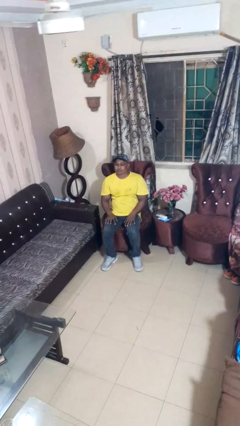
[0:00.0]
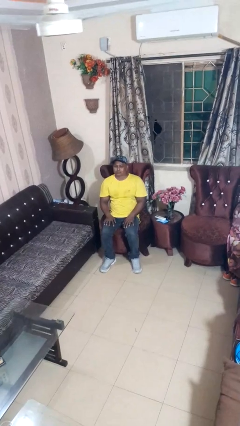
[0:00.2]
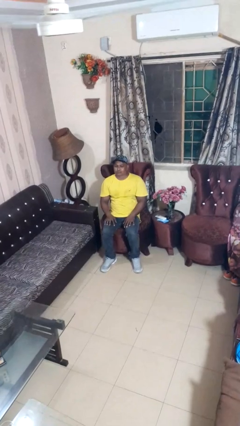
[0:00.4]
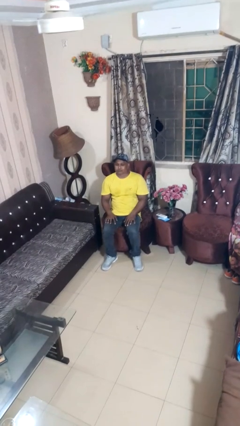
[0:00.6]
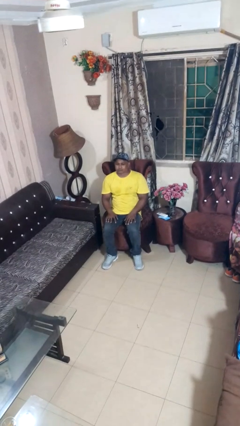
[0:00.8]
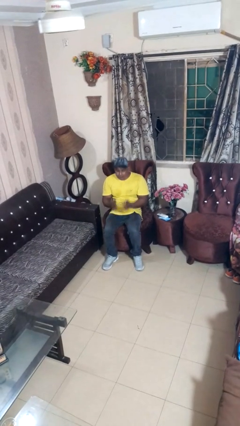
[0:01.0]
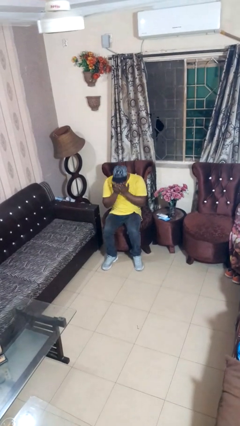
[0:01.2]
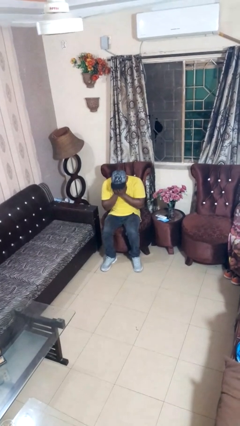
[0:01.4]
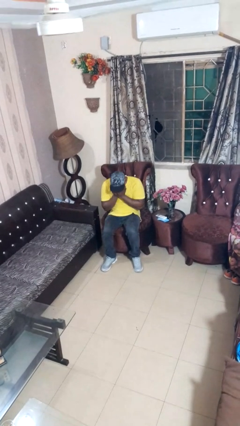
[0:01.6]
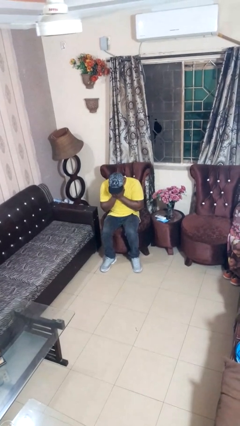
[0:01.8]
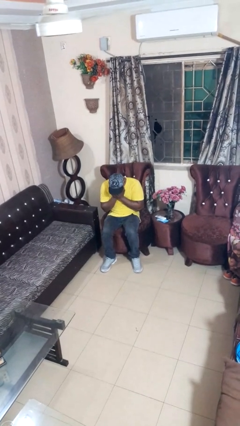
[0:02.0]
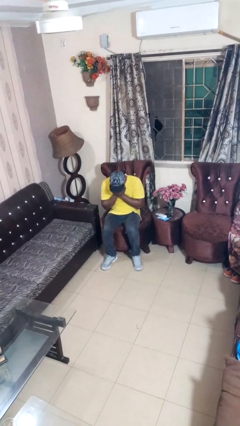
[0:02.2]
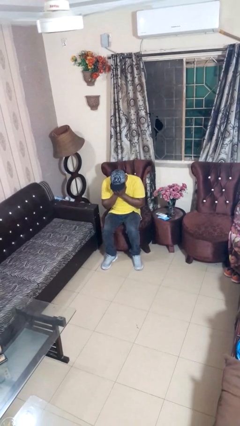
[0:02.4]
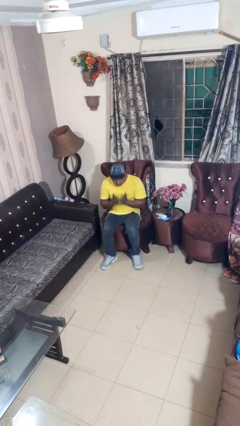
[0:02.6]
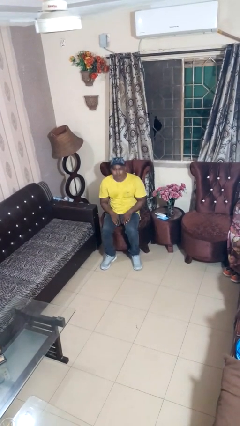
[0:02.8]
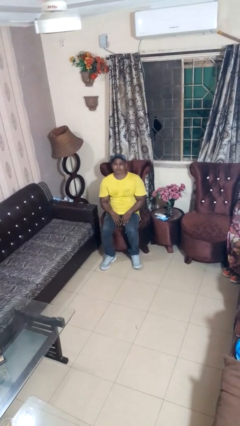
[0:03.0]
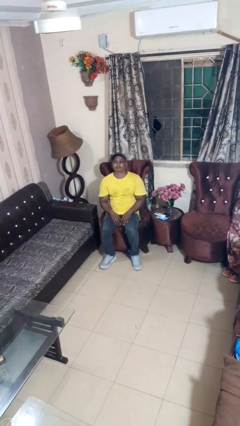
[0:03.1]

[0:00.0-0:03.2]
person covers face with hands

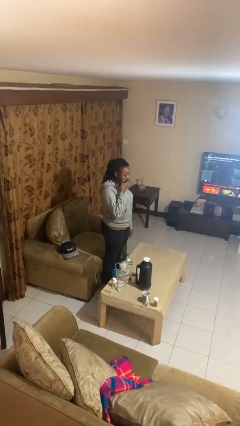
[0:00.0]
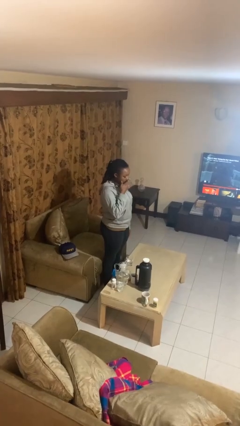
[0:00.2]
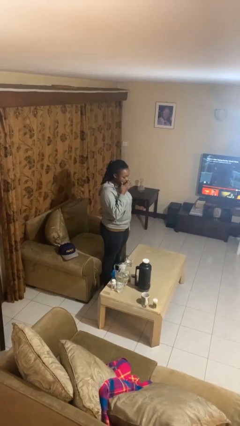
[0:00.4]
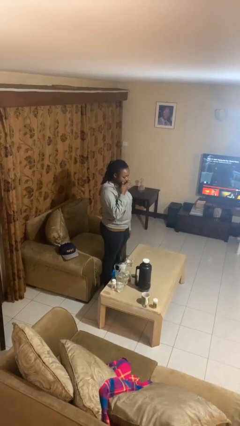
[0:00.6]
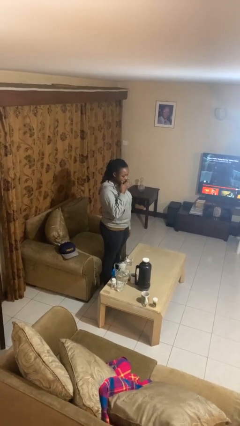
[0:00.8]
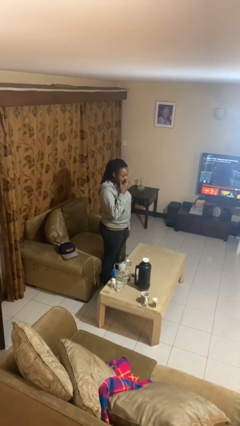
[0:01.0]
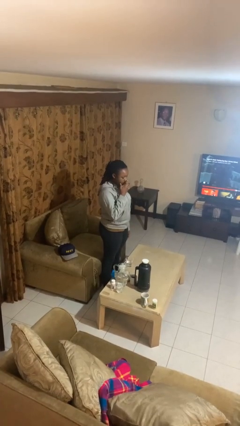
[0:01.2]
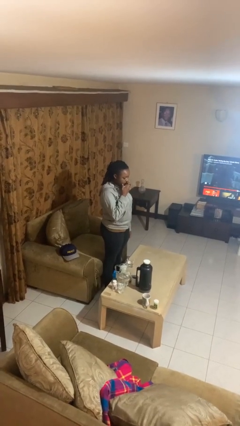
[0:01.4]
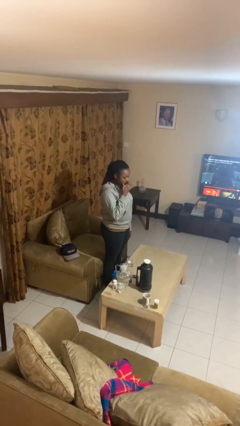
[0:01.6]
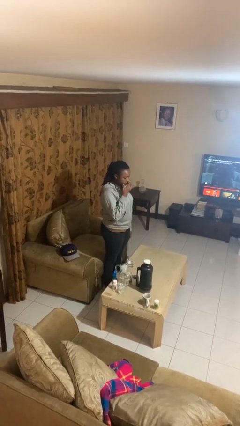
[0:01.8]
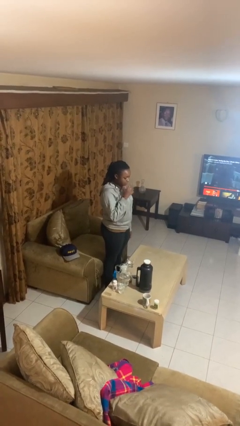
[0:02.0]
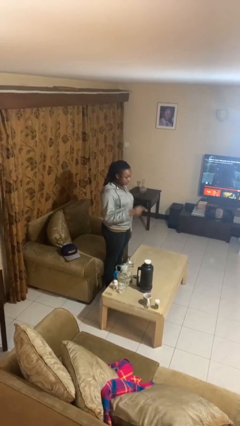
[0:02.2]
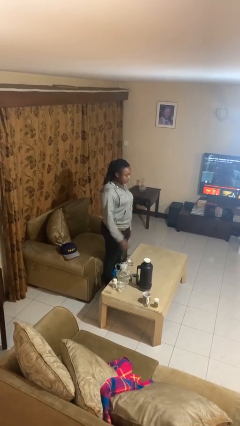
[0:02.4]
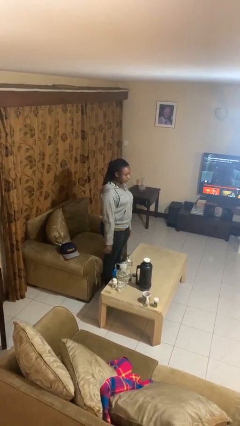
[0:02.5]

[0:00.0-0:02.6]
person licks fingers

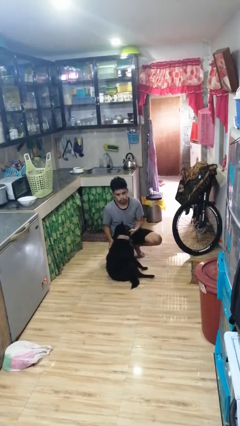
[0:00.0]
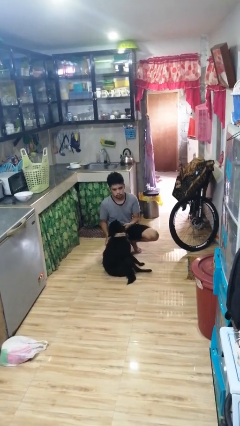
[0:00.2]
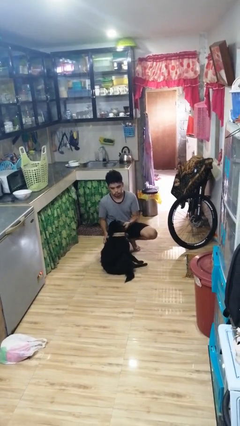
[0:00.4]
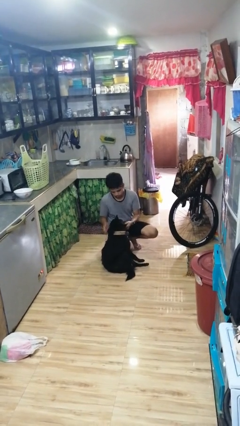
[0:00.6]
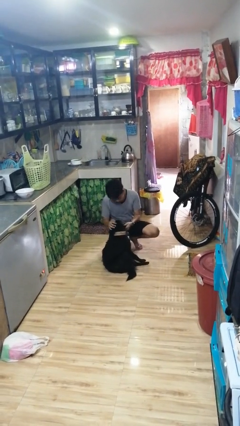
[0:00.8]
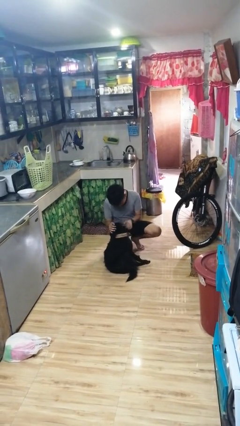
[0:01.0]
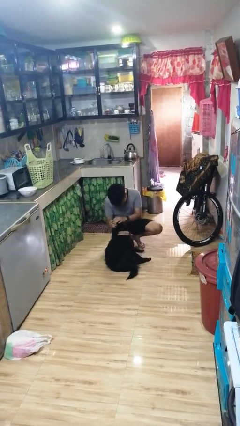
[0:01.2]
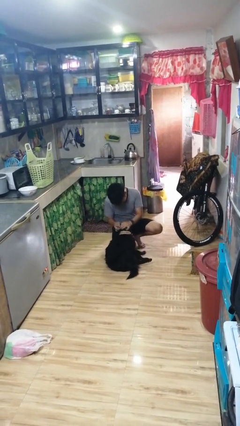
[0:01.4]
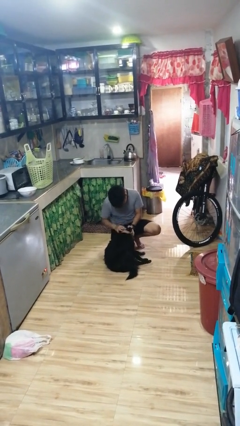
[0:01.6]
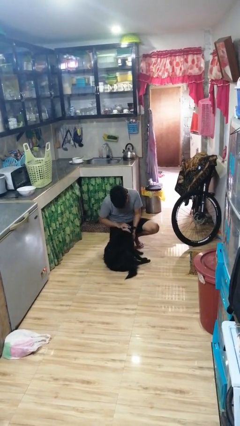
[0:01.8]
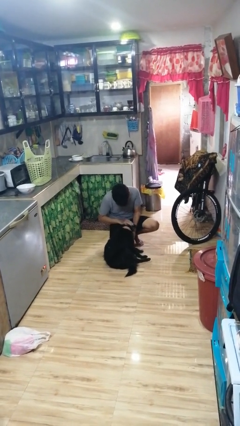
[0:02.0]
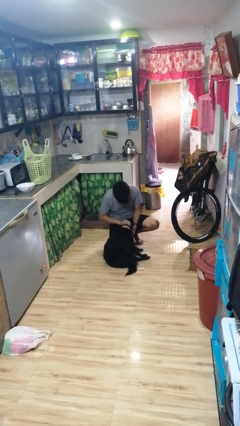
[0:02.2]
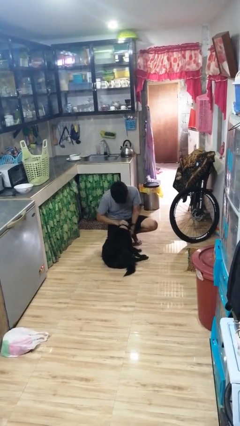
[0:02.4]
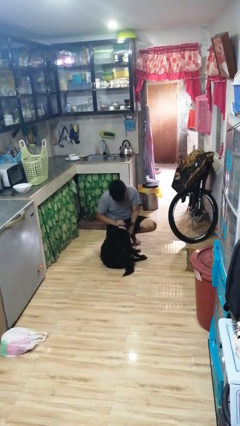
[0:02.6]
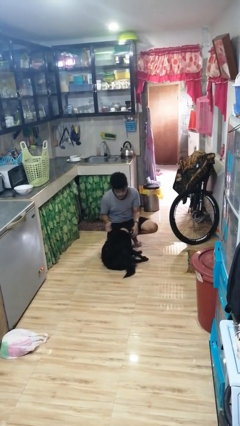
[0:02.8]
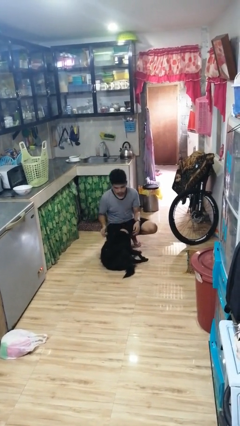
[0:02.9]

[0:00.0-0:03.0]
person pets dog

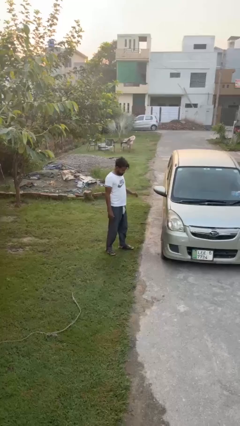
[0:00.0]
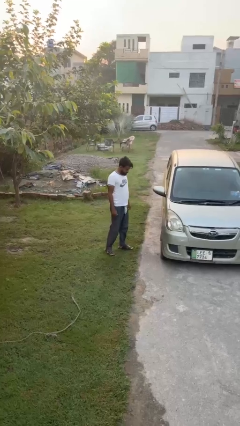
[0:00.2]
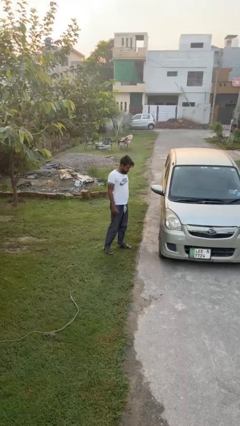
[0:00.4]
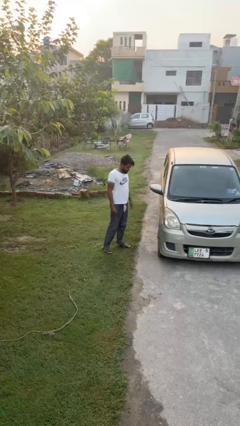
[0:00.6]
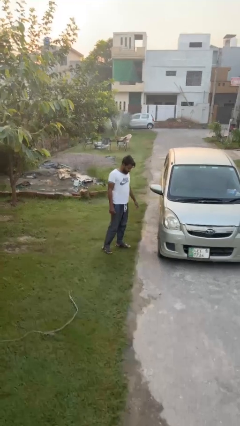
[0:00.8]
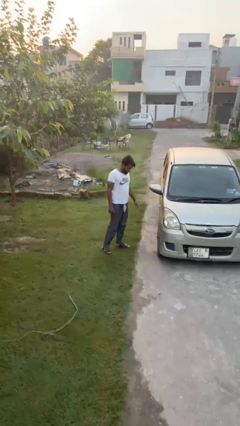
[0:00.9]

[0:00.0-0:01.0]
person kicks car tires

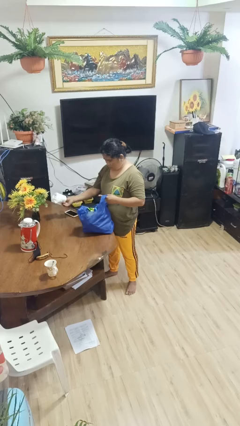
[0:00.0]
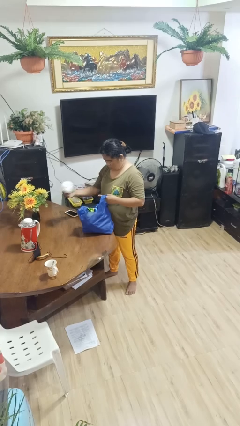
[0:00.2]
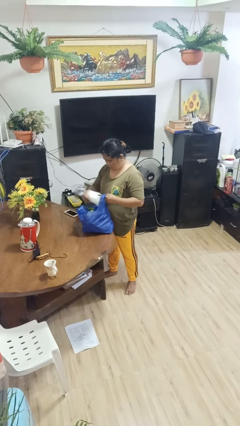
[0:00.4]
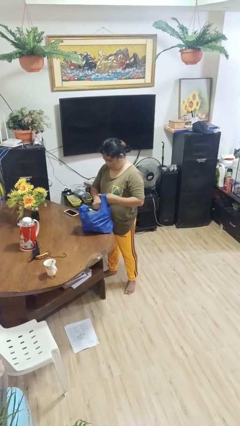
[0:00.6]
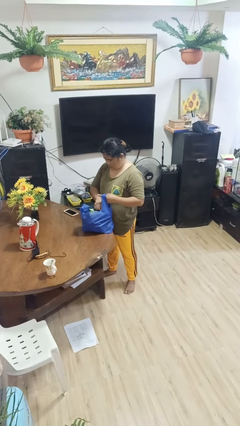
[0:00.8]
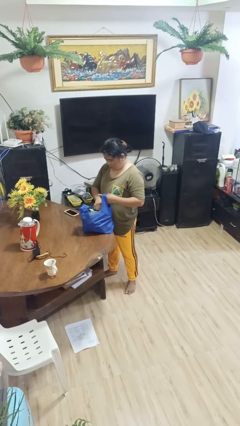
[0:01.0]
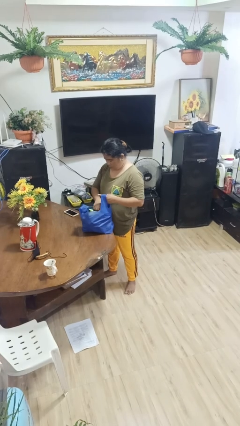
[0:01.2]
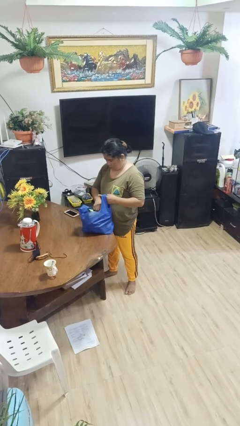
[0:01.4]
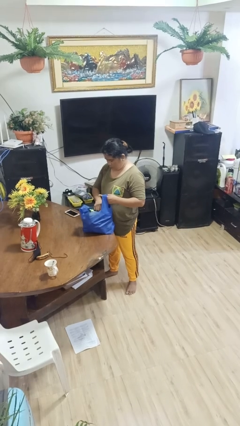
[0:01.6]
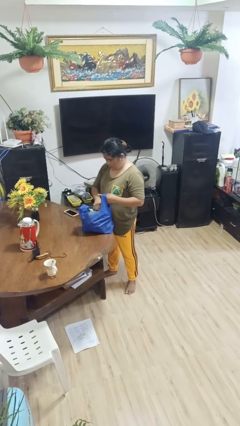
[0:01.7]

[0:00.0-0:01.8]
person puts object into bag

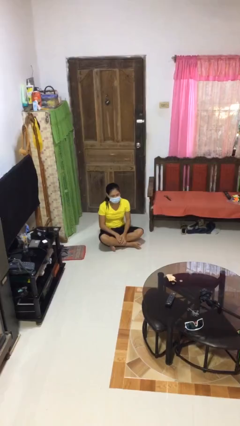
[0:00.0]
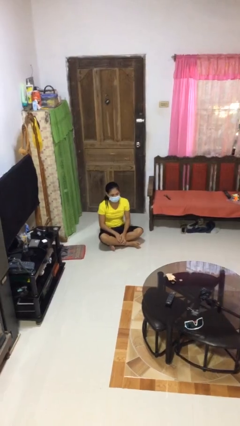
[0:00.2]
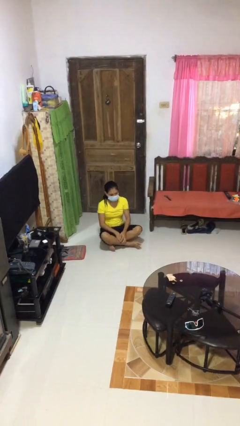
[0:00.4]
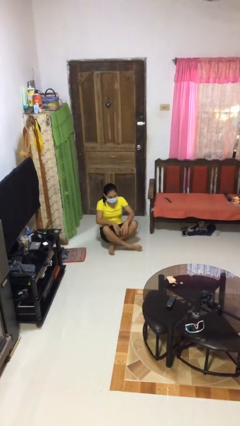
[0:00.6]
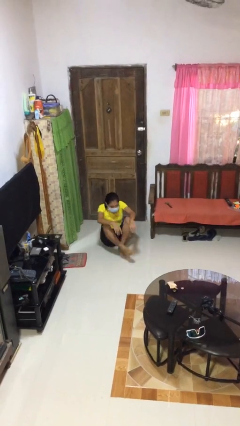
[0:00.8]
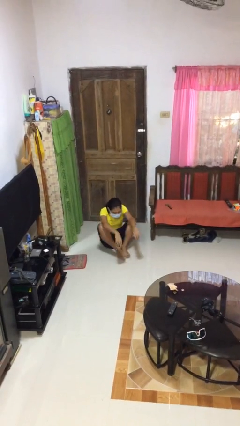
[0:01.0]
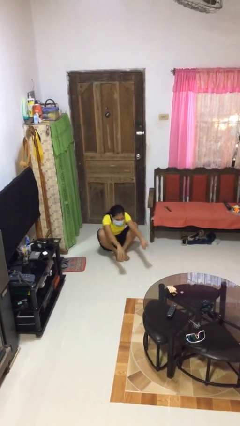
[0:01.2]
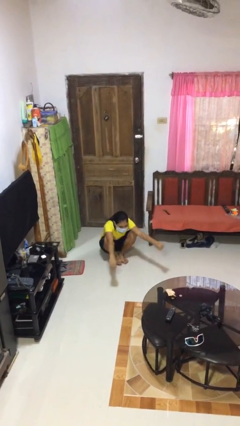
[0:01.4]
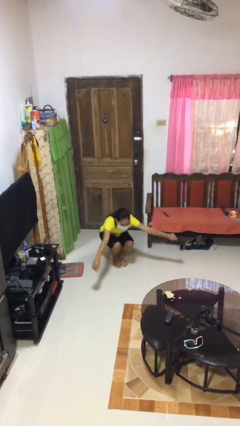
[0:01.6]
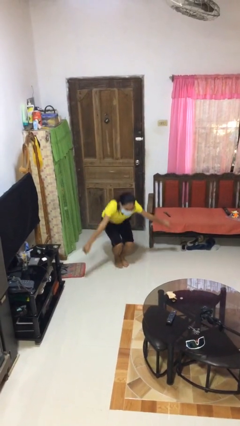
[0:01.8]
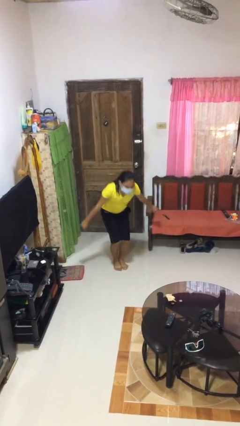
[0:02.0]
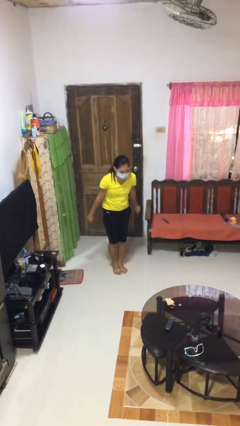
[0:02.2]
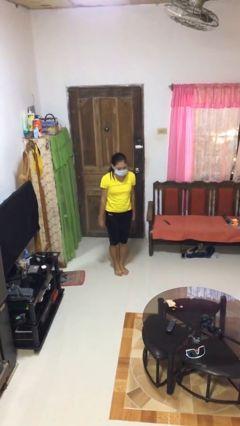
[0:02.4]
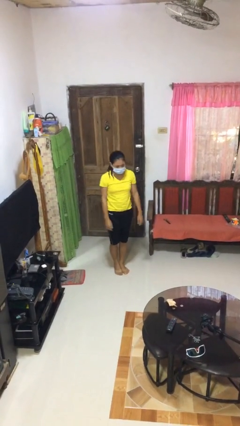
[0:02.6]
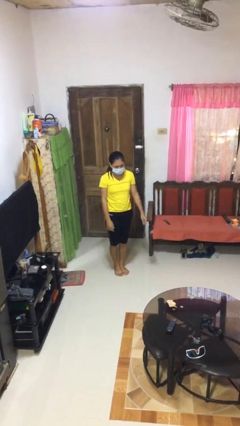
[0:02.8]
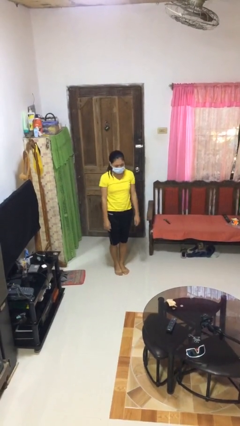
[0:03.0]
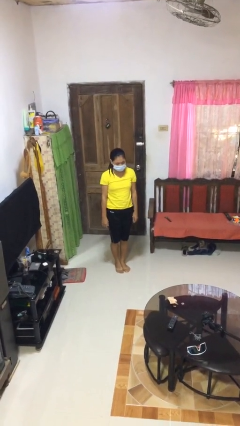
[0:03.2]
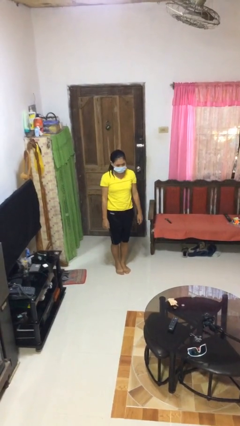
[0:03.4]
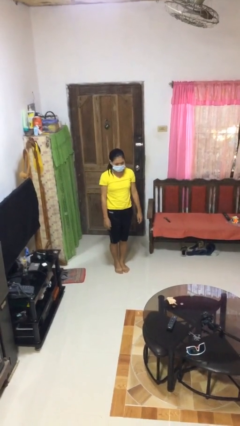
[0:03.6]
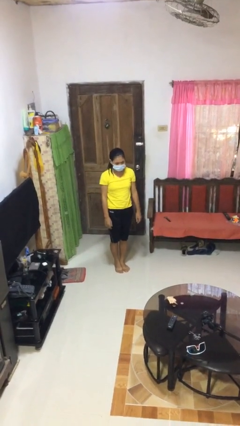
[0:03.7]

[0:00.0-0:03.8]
person stands up from floor

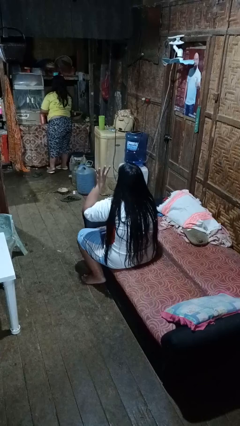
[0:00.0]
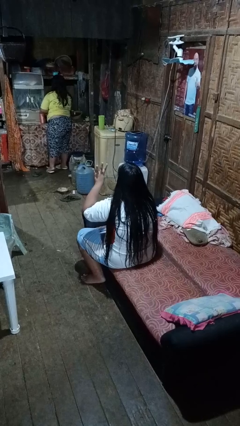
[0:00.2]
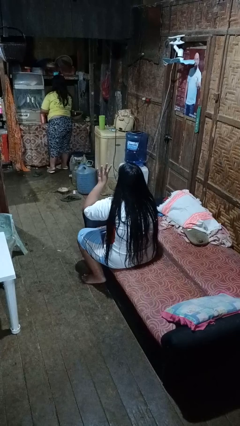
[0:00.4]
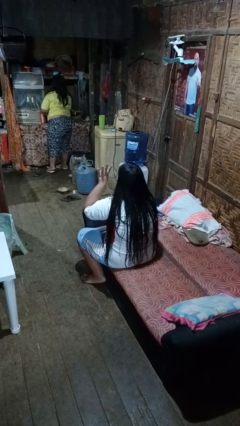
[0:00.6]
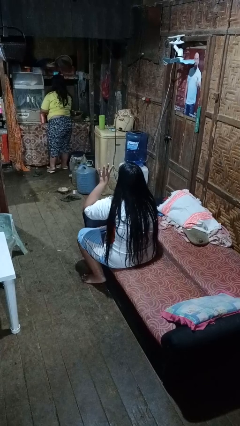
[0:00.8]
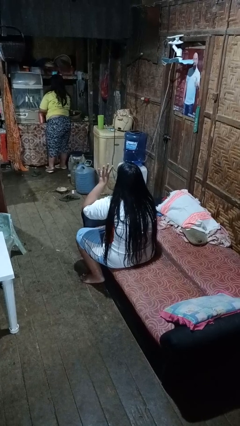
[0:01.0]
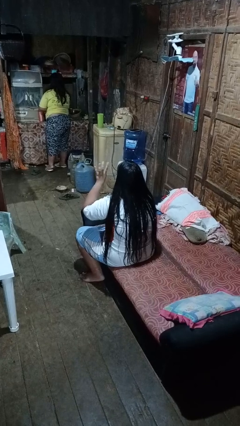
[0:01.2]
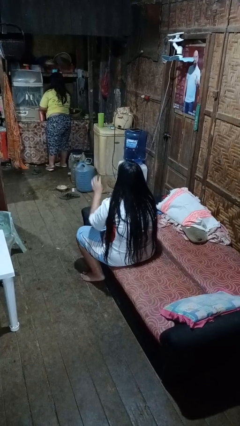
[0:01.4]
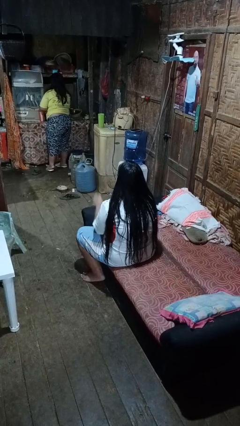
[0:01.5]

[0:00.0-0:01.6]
person gestures number four

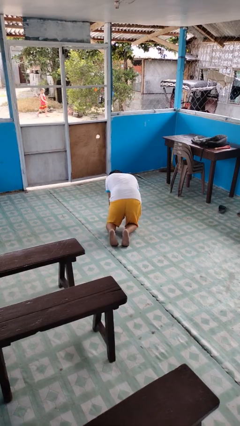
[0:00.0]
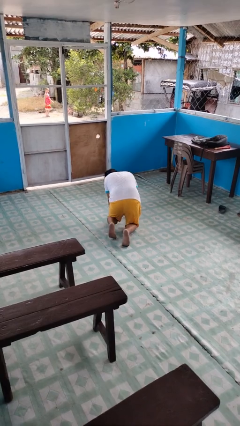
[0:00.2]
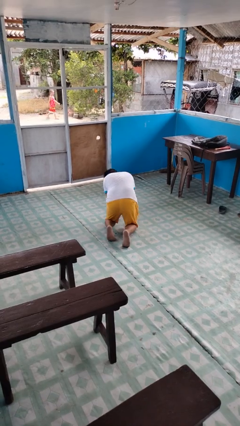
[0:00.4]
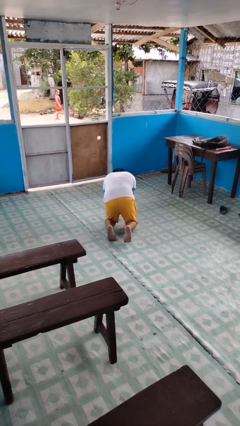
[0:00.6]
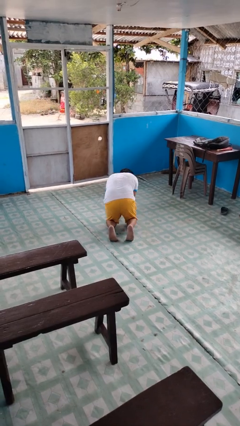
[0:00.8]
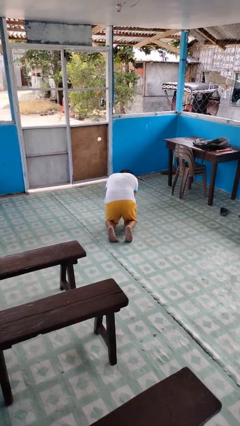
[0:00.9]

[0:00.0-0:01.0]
person crawls